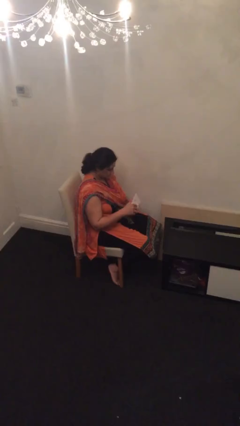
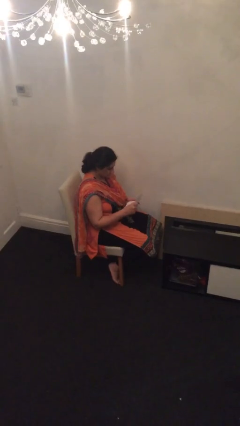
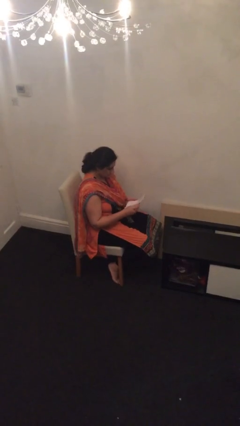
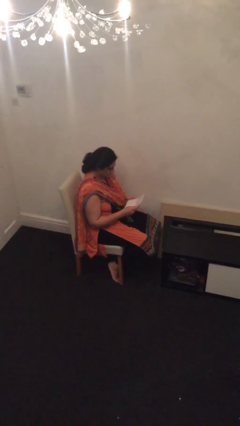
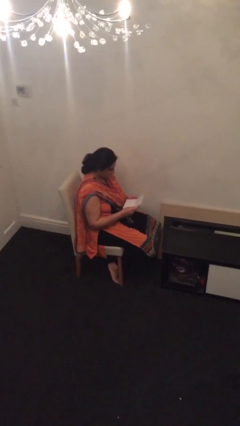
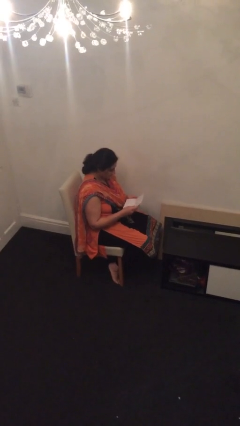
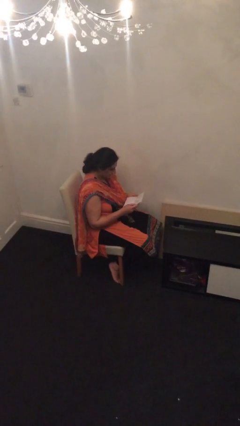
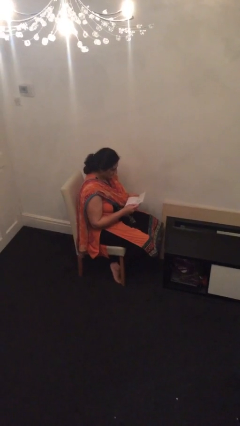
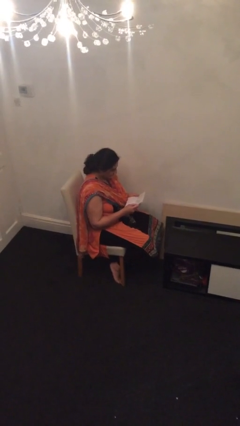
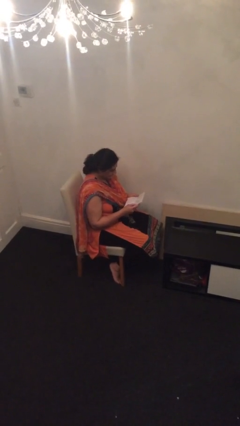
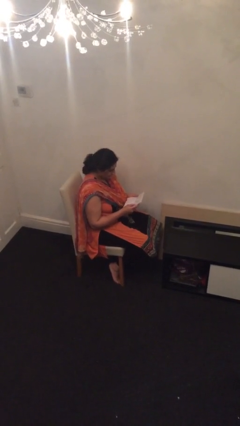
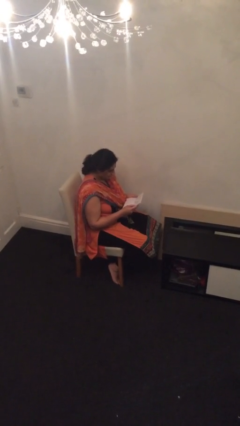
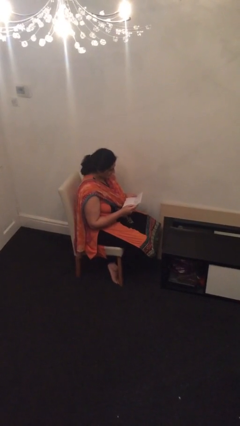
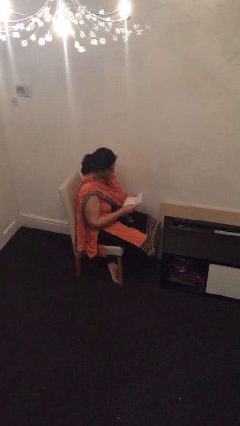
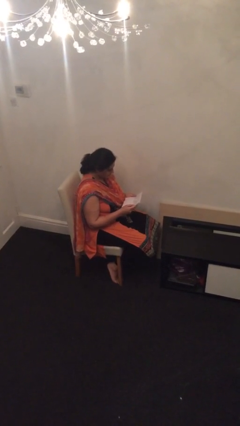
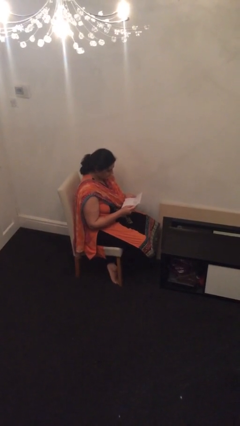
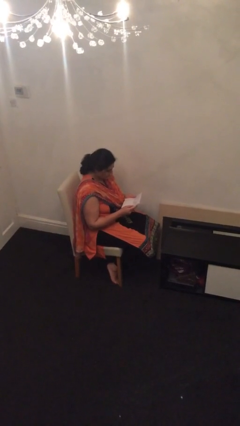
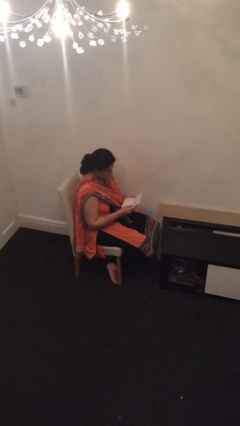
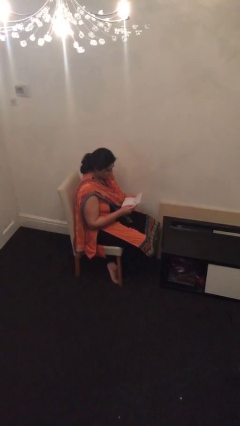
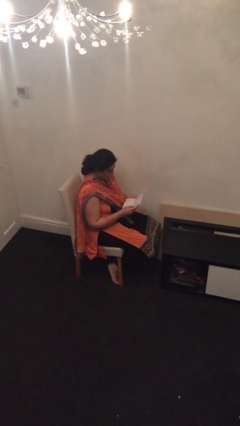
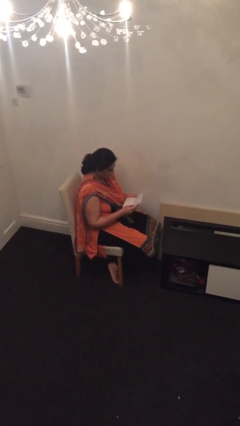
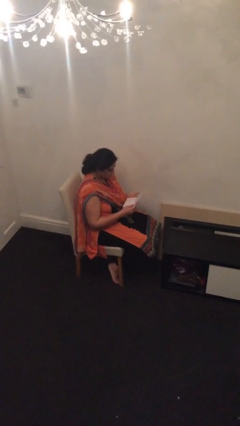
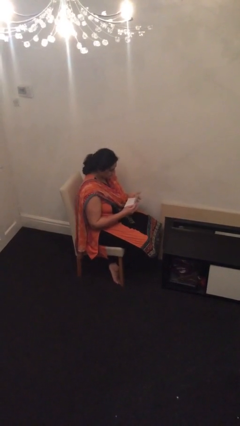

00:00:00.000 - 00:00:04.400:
person reads document

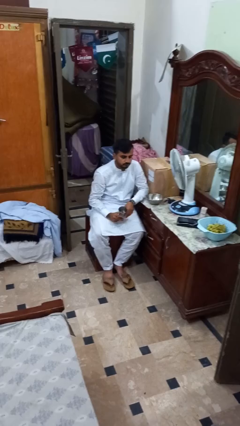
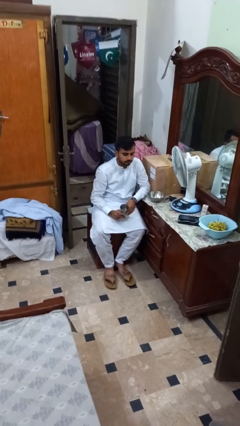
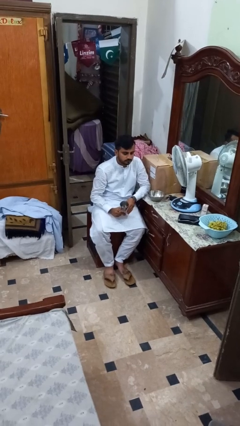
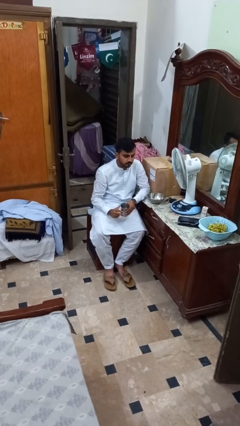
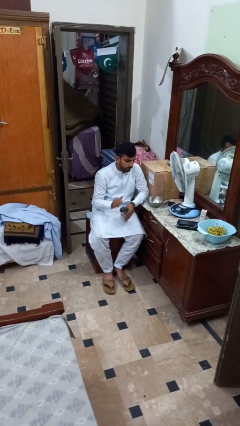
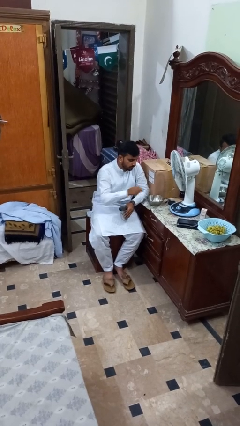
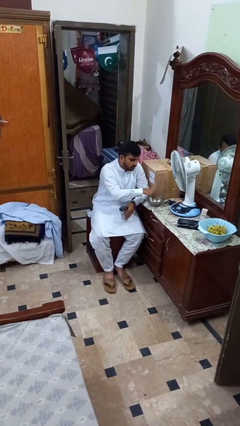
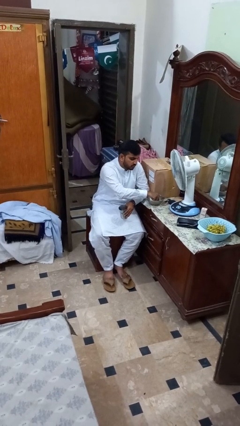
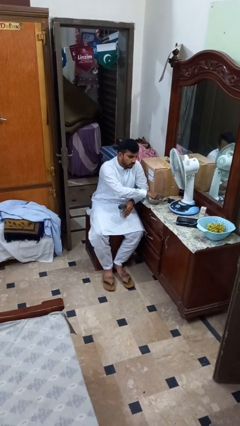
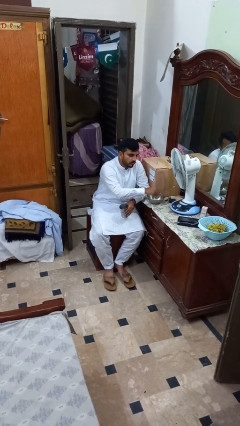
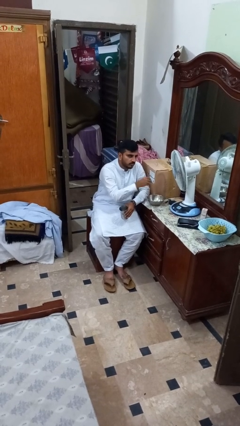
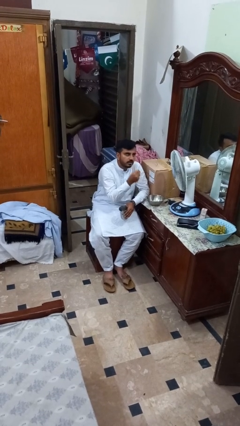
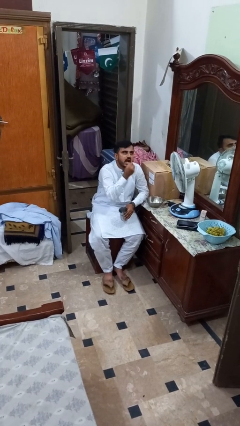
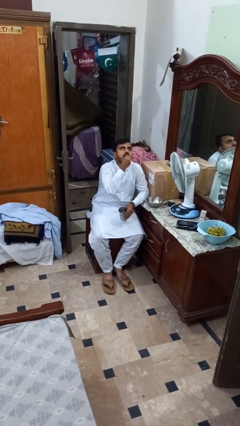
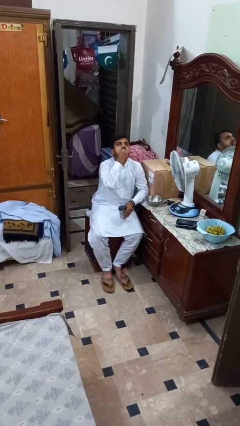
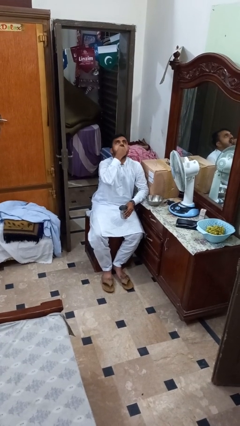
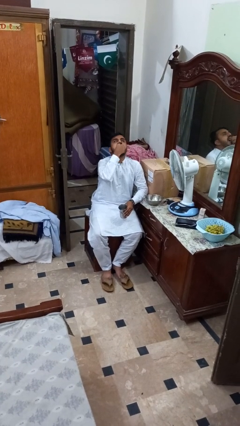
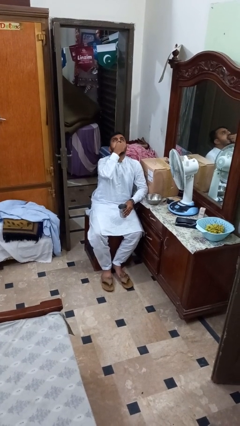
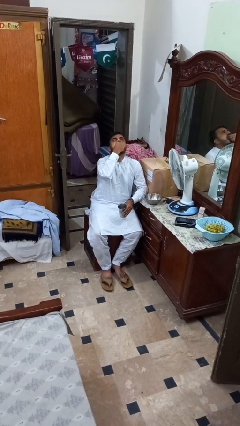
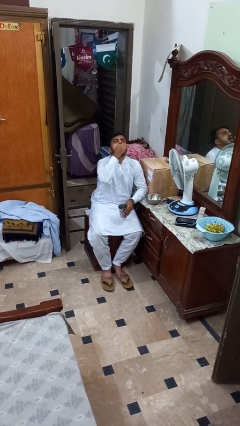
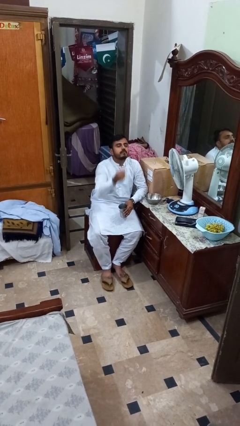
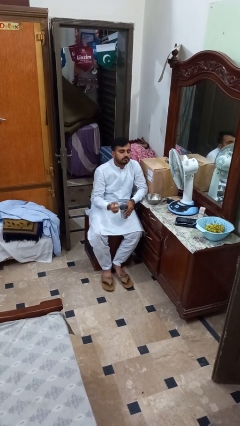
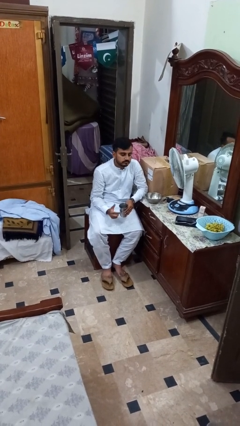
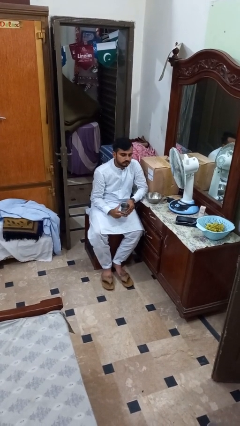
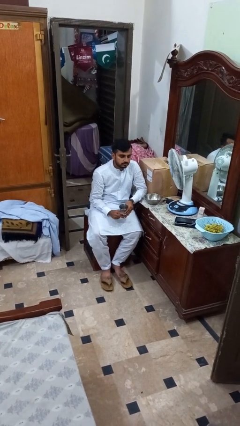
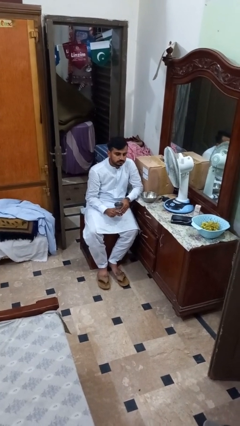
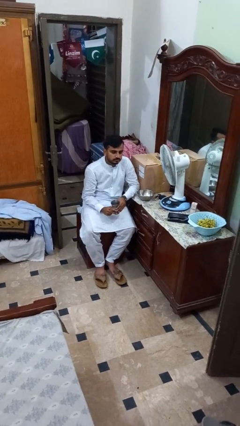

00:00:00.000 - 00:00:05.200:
person takes medicine pills

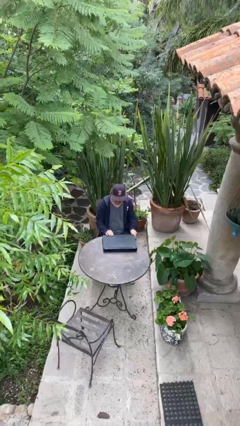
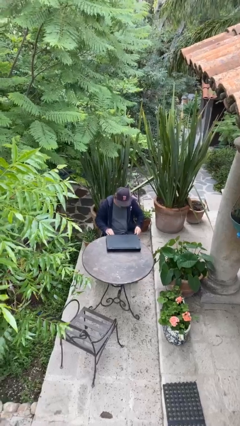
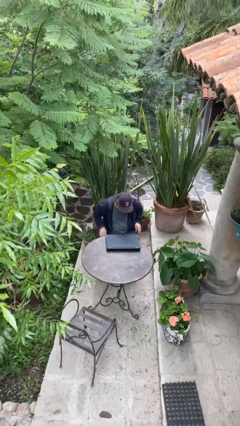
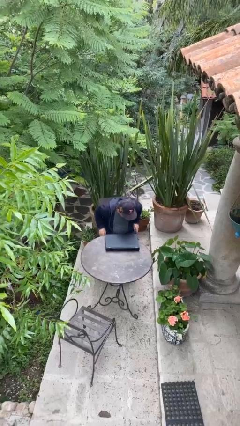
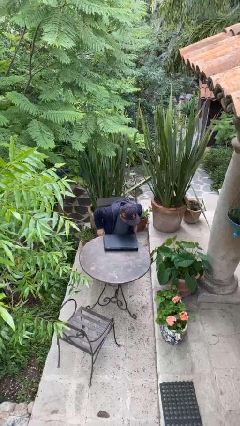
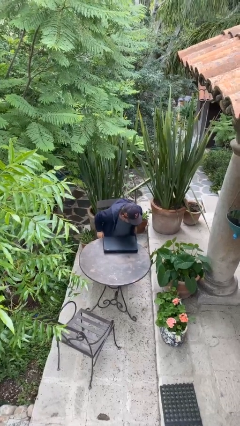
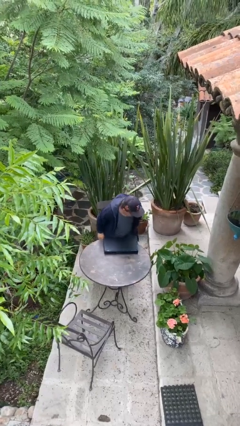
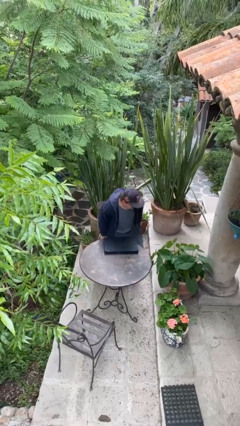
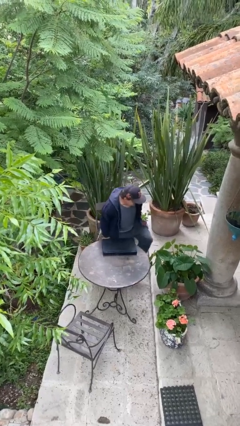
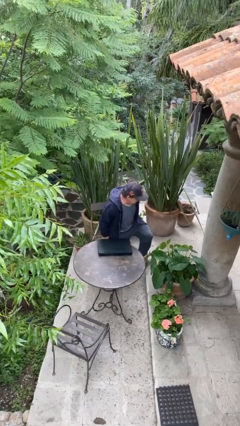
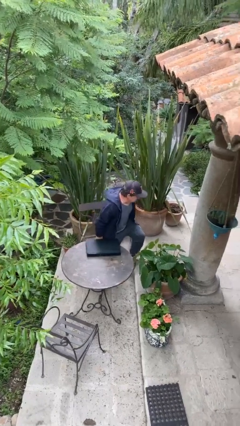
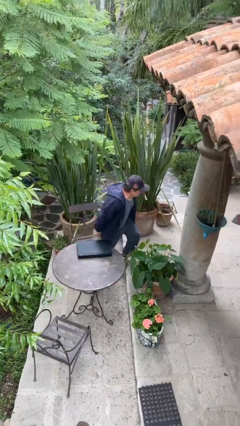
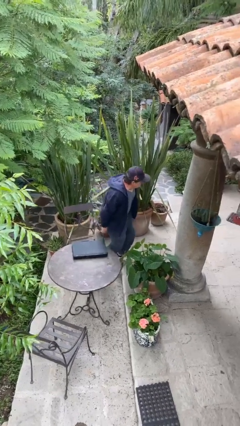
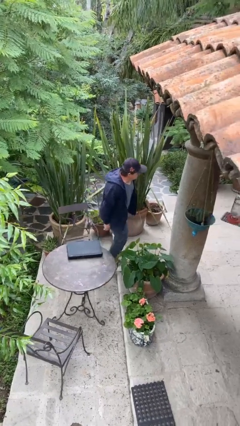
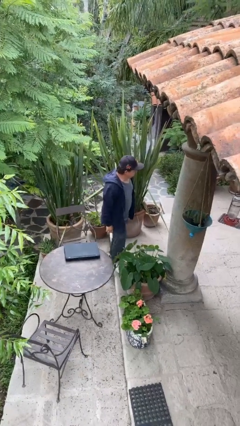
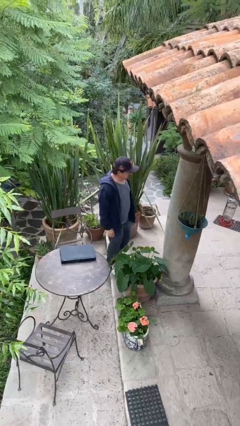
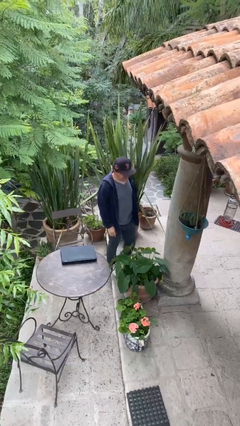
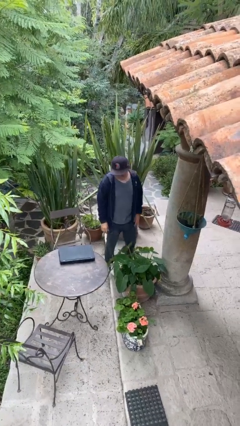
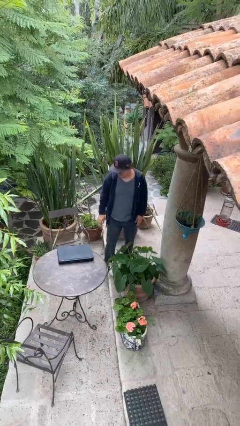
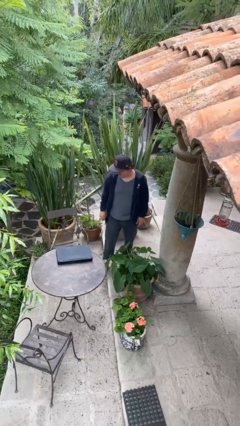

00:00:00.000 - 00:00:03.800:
person stands up

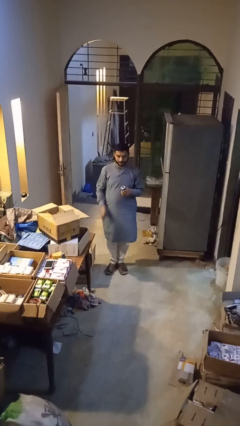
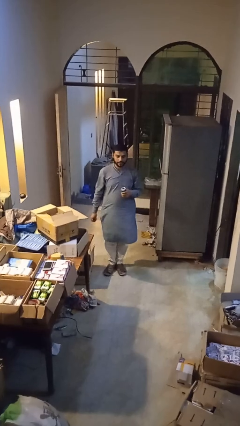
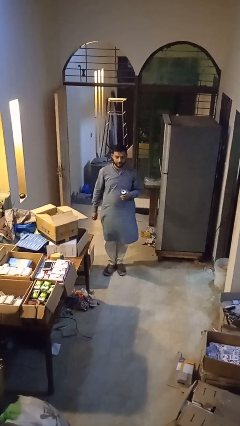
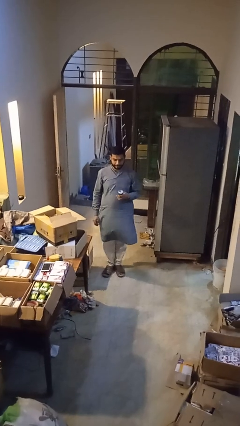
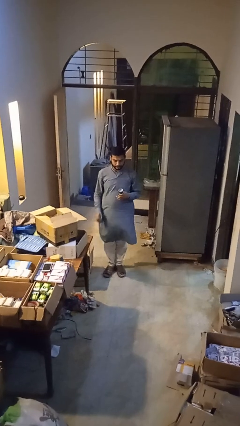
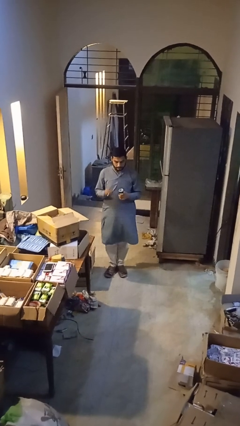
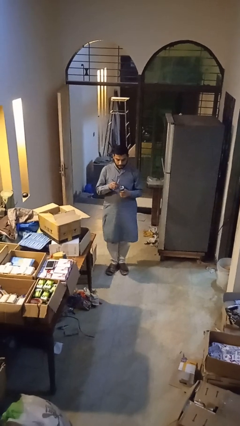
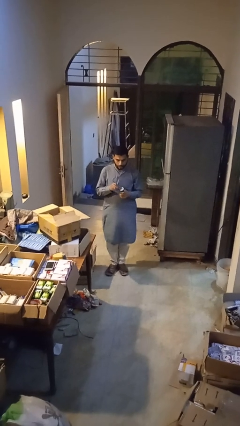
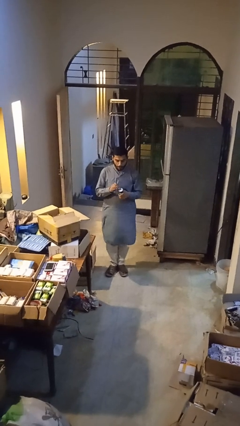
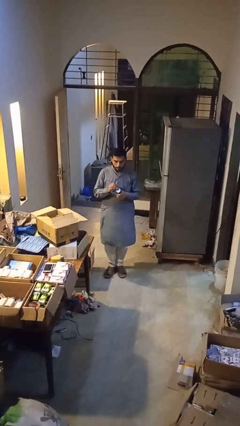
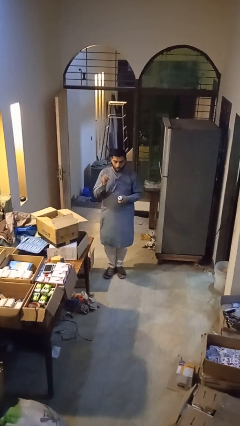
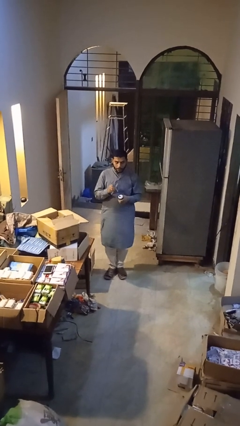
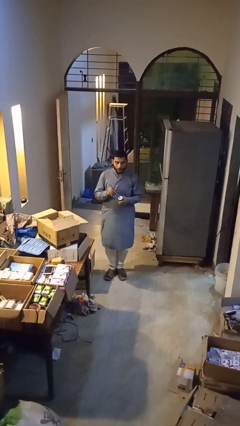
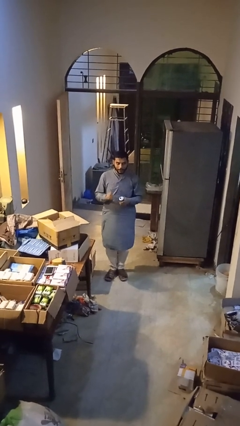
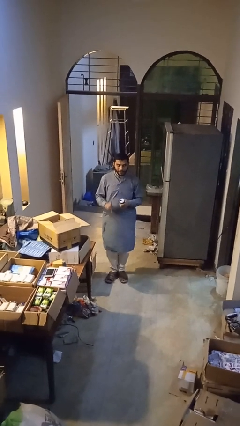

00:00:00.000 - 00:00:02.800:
person opens can with can opener

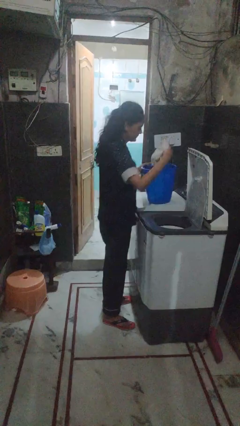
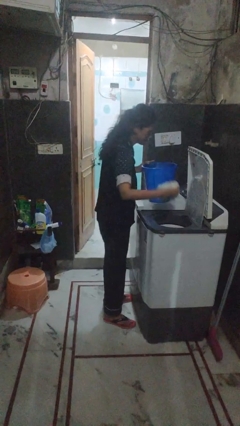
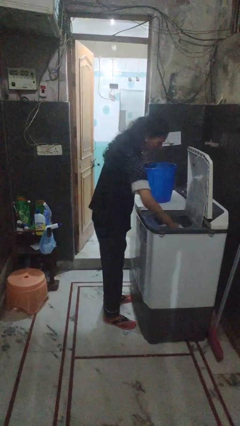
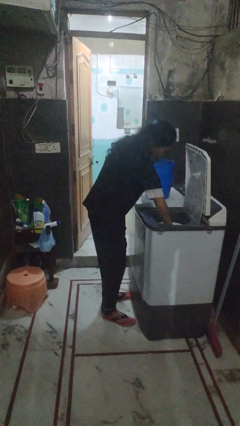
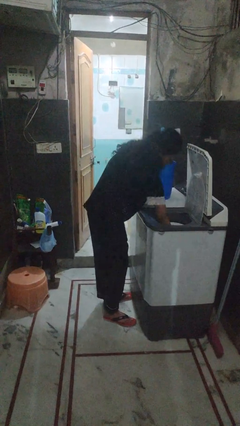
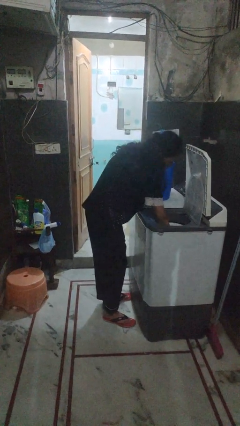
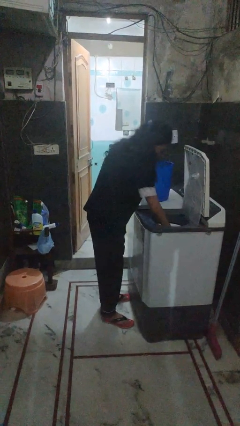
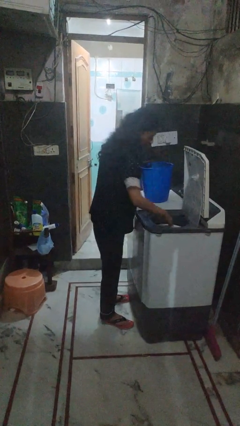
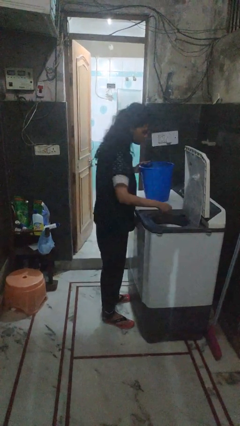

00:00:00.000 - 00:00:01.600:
person loads dryer
